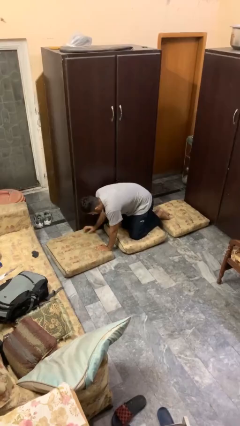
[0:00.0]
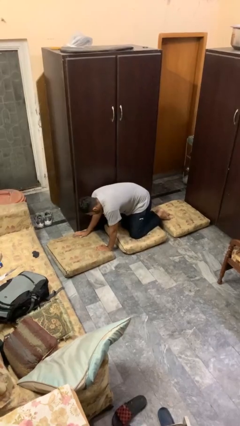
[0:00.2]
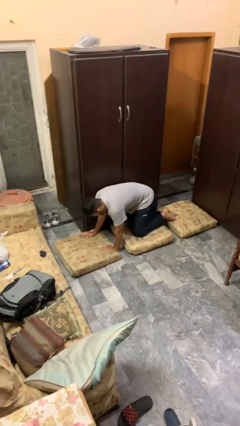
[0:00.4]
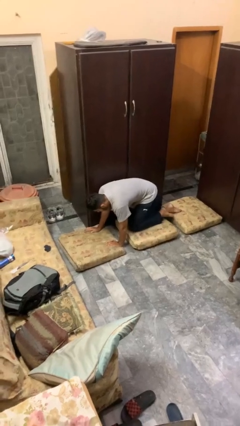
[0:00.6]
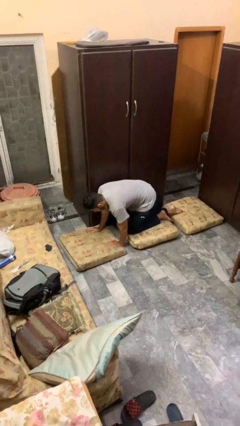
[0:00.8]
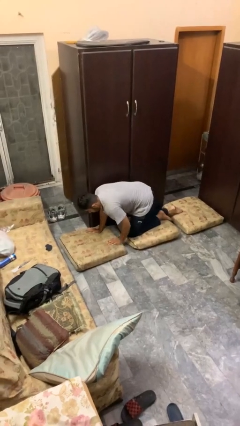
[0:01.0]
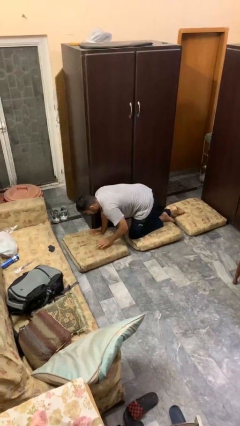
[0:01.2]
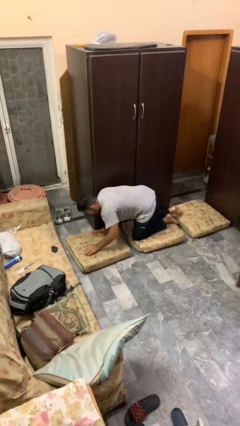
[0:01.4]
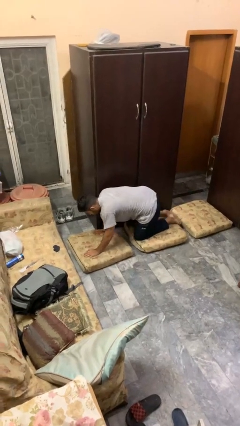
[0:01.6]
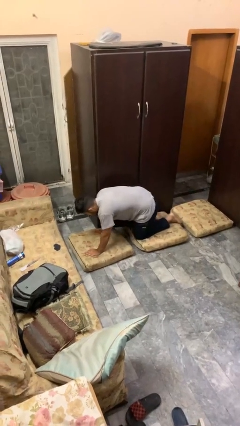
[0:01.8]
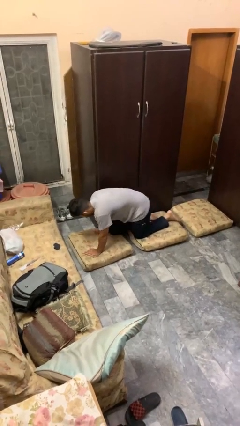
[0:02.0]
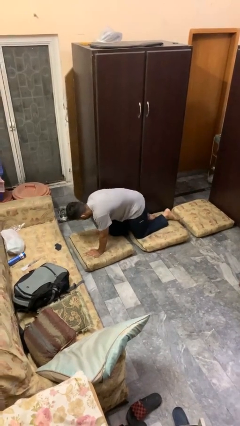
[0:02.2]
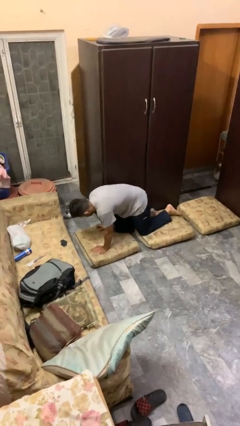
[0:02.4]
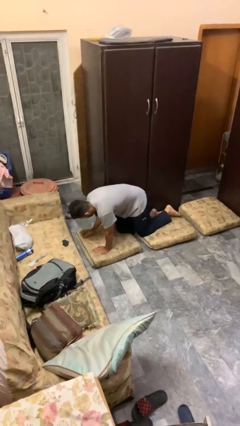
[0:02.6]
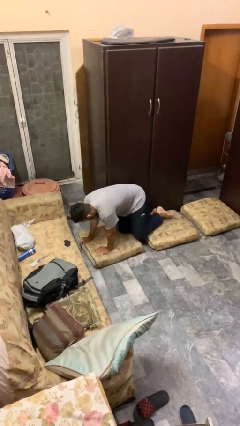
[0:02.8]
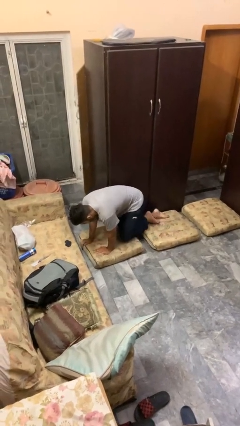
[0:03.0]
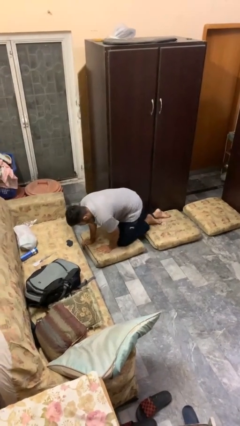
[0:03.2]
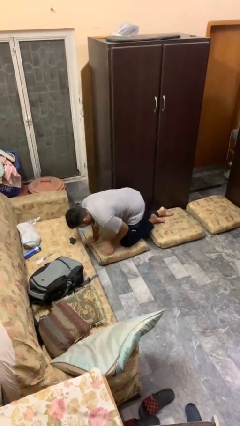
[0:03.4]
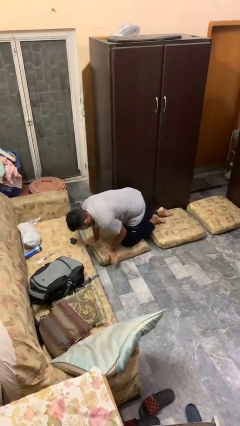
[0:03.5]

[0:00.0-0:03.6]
person crawls

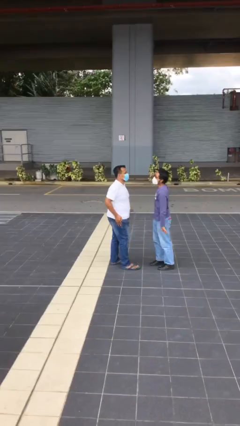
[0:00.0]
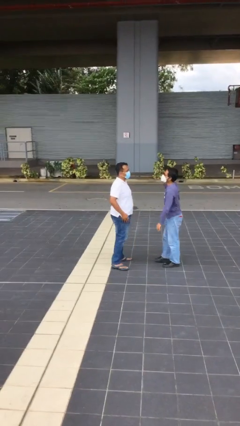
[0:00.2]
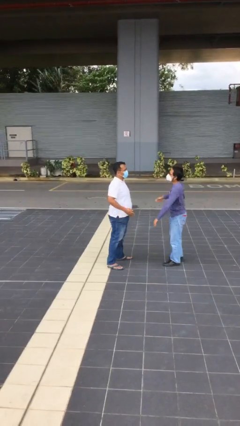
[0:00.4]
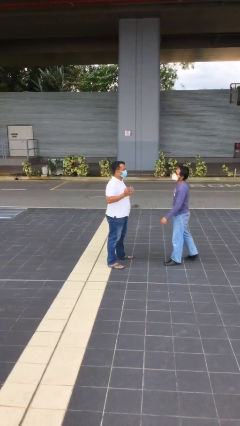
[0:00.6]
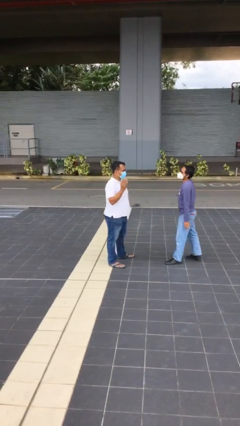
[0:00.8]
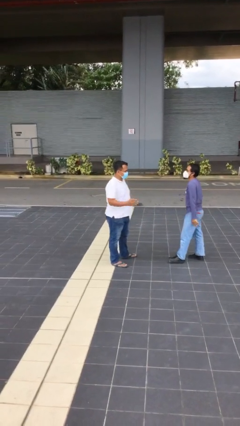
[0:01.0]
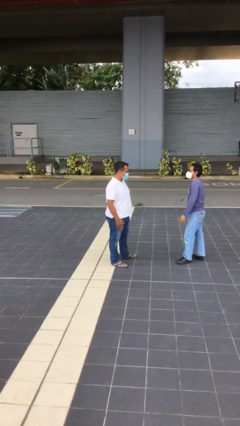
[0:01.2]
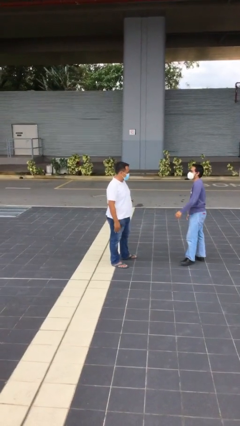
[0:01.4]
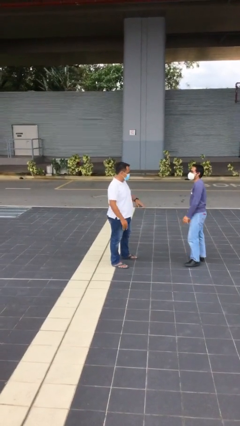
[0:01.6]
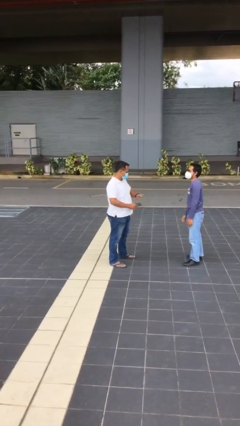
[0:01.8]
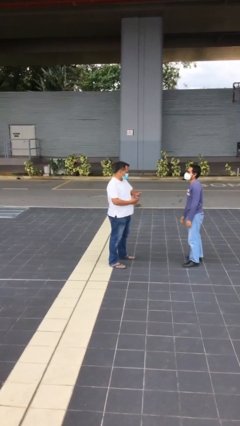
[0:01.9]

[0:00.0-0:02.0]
person talks to person

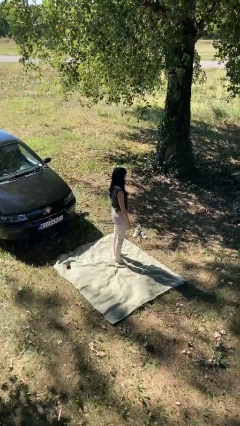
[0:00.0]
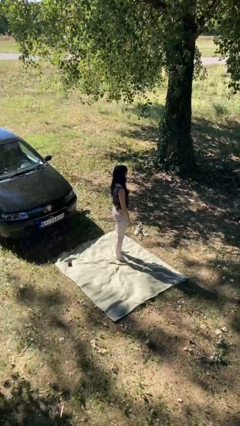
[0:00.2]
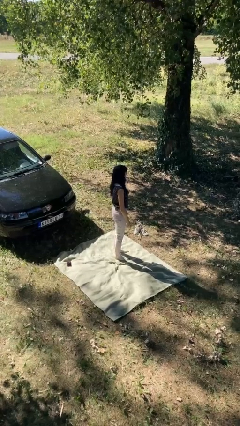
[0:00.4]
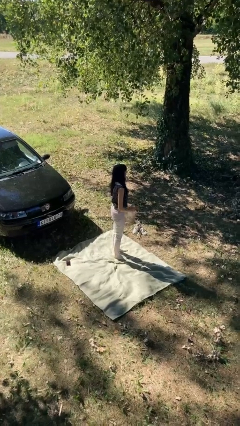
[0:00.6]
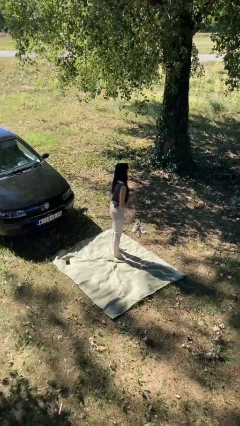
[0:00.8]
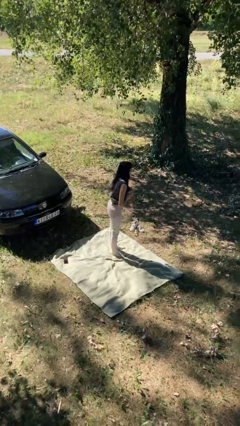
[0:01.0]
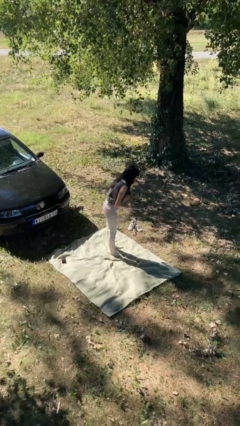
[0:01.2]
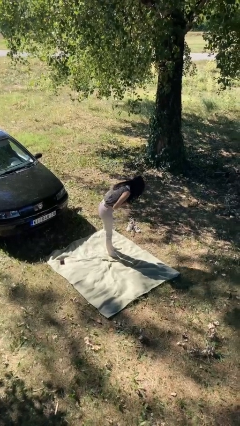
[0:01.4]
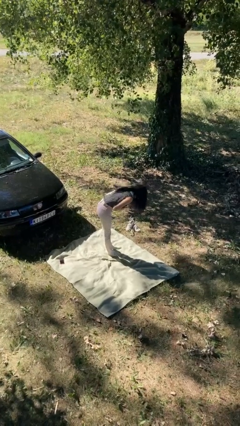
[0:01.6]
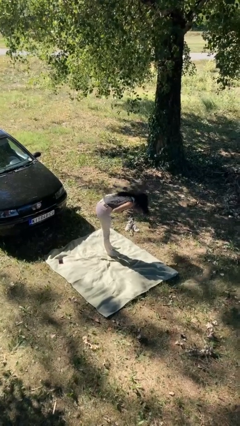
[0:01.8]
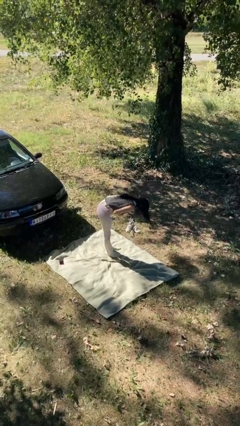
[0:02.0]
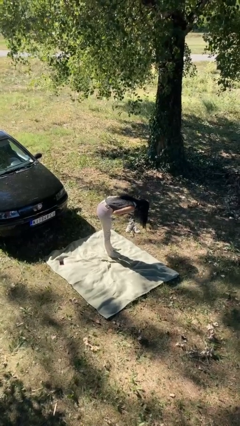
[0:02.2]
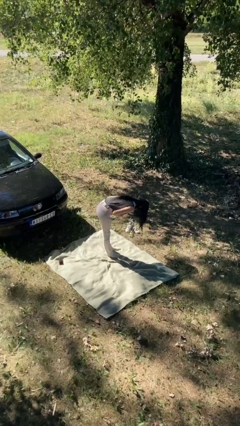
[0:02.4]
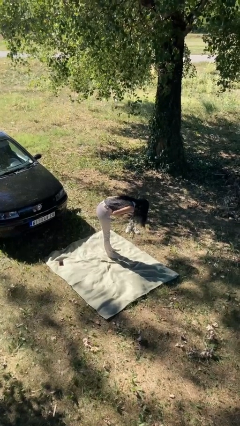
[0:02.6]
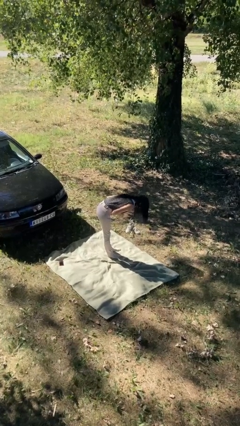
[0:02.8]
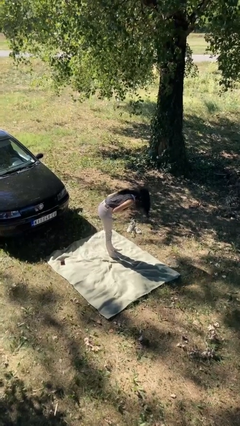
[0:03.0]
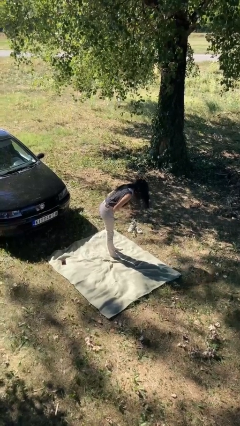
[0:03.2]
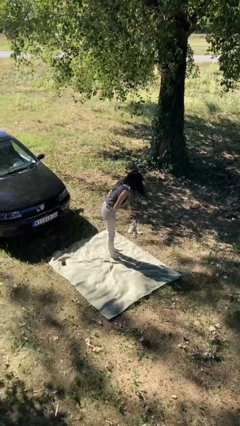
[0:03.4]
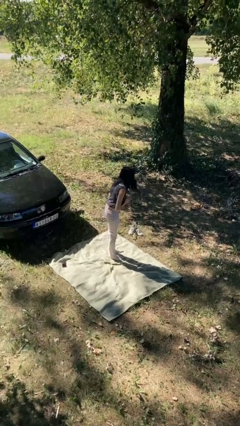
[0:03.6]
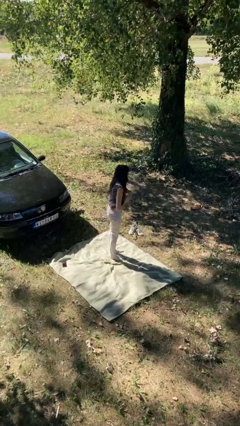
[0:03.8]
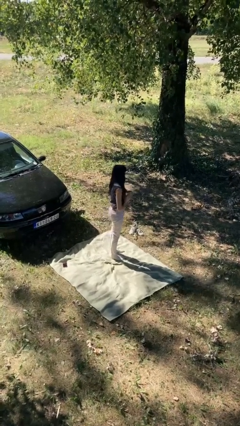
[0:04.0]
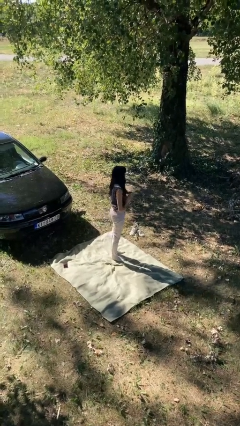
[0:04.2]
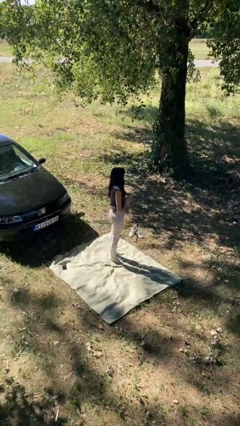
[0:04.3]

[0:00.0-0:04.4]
person bows

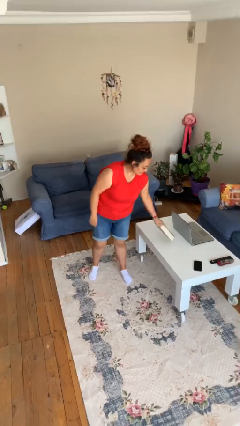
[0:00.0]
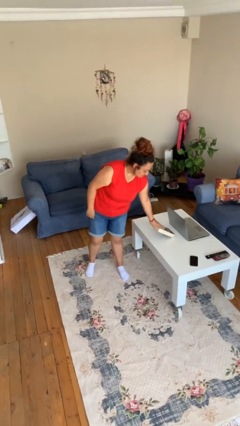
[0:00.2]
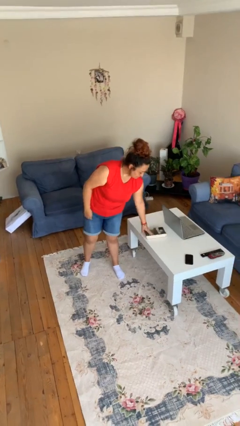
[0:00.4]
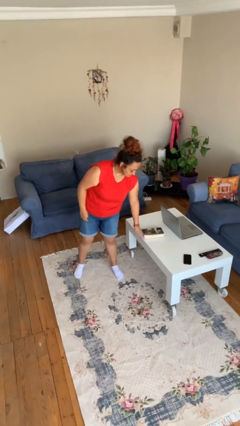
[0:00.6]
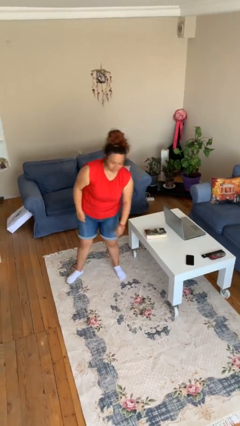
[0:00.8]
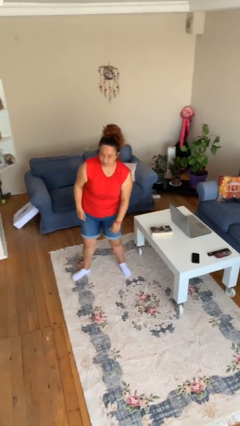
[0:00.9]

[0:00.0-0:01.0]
person puts down object on table

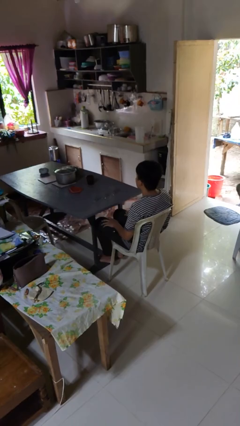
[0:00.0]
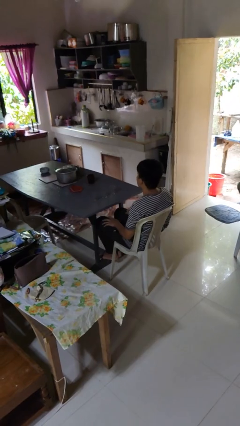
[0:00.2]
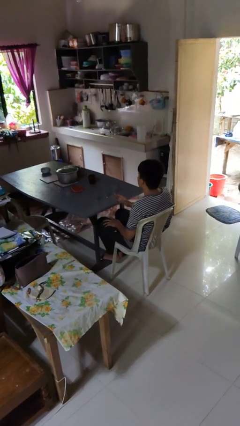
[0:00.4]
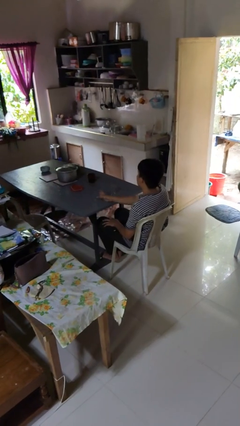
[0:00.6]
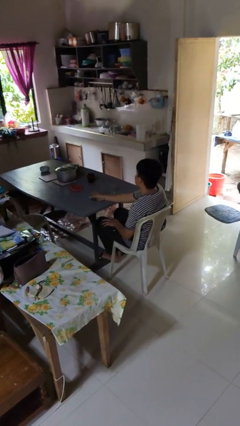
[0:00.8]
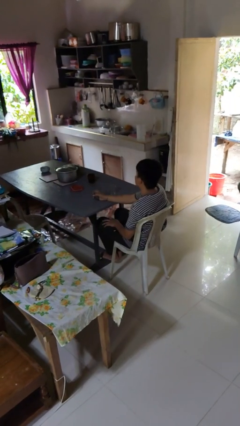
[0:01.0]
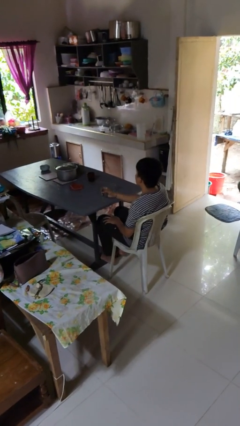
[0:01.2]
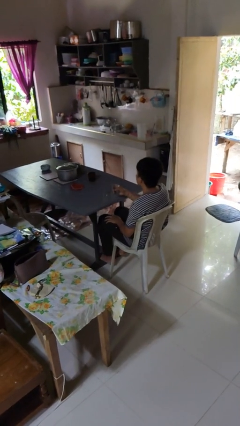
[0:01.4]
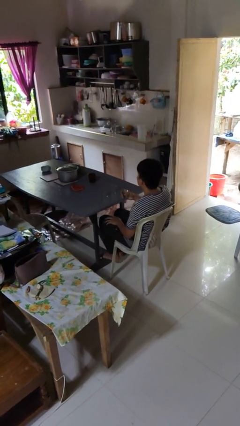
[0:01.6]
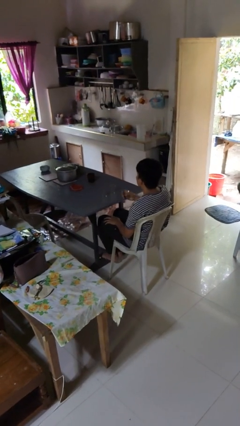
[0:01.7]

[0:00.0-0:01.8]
person picks up object from table

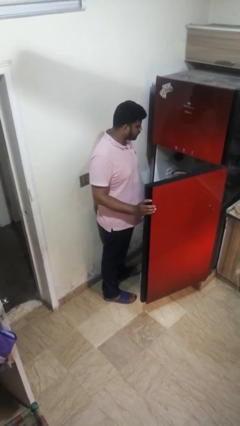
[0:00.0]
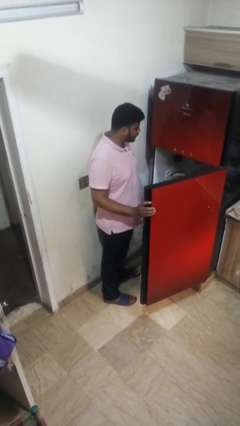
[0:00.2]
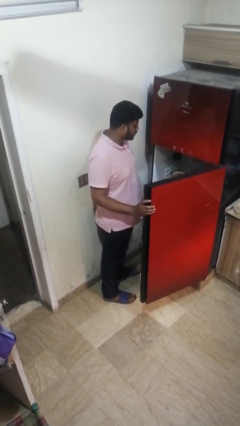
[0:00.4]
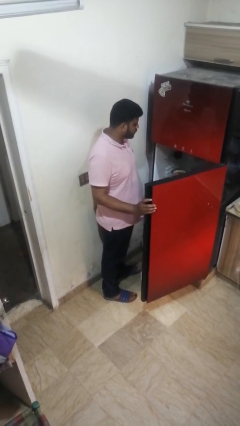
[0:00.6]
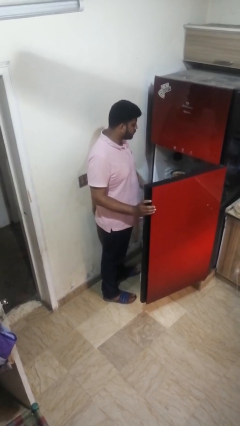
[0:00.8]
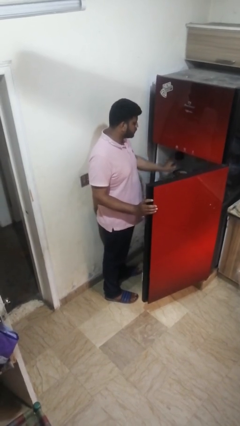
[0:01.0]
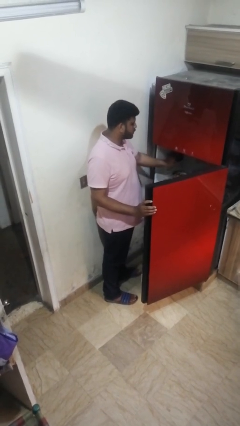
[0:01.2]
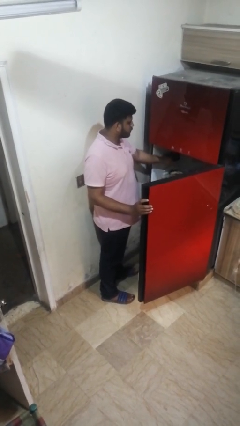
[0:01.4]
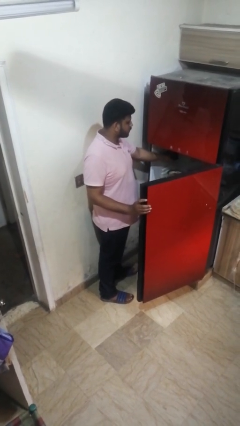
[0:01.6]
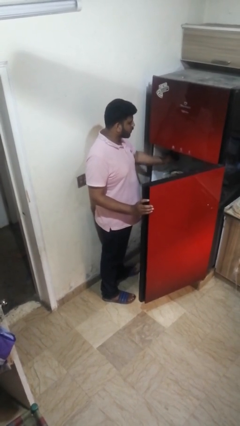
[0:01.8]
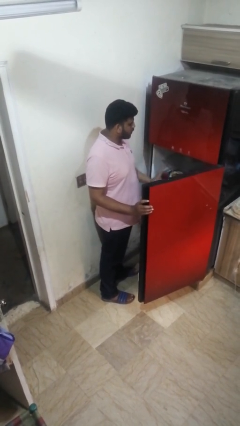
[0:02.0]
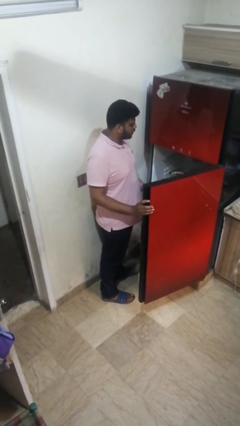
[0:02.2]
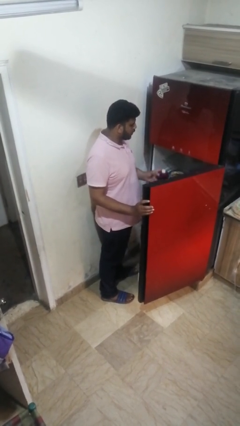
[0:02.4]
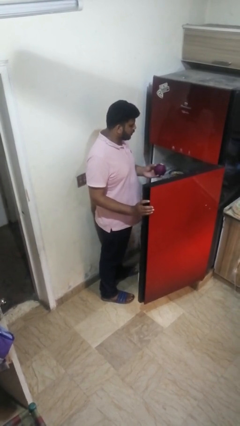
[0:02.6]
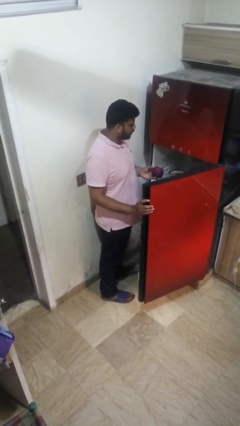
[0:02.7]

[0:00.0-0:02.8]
person takes object from refrigerator

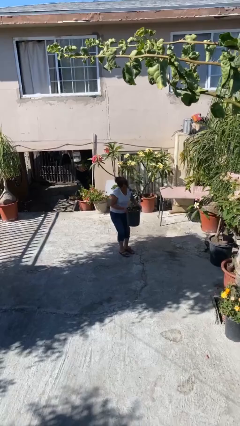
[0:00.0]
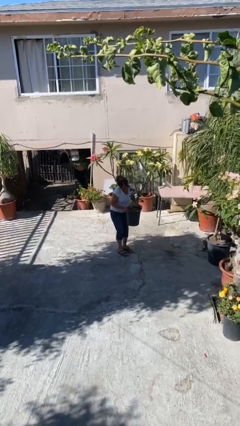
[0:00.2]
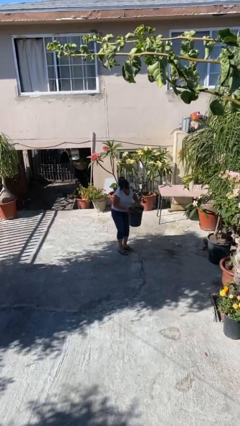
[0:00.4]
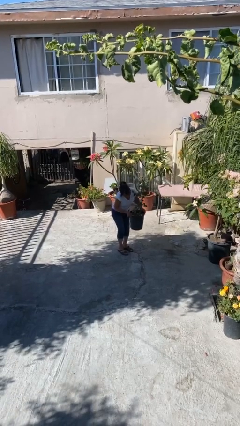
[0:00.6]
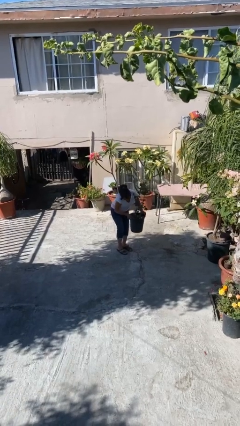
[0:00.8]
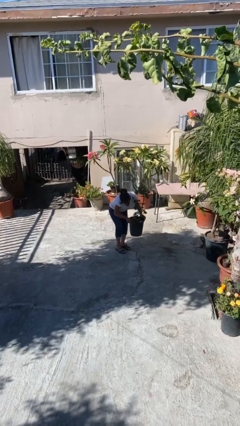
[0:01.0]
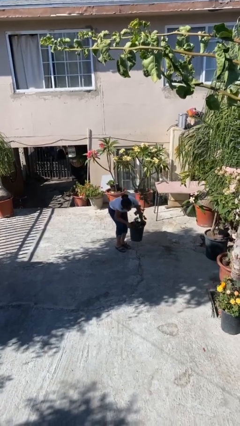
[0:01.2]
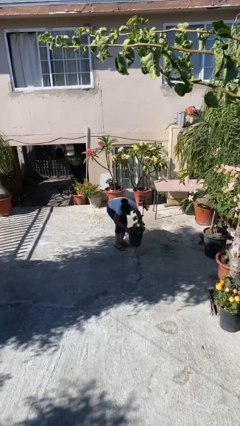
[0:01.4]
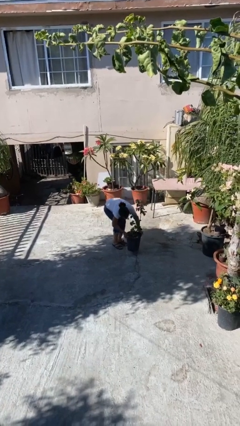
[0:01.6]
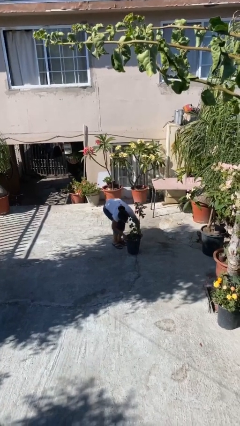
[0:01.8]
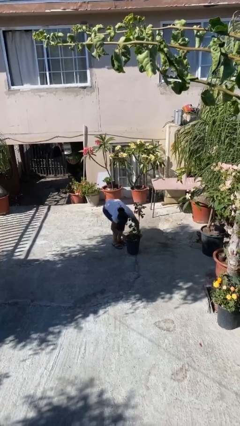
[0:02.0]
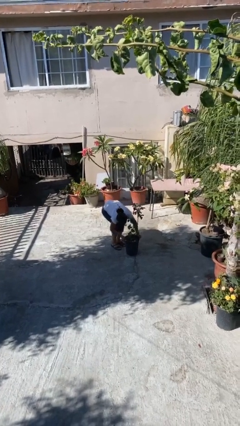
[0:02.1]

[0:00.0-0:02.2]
person puts down object on floor
